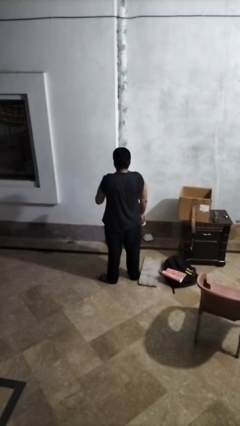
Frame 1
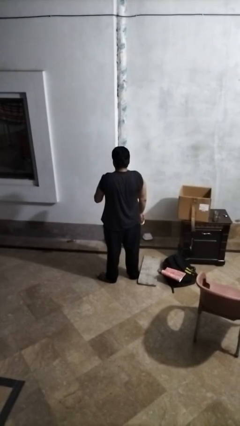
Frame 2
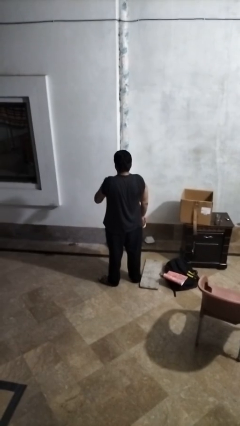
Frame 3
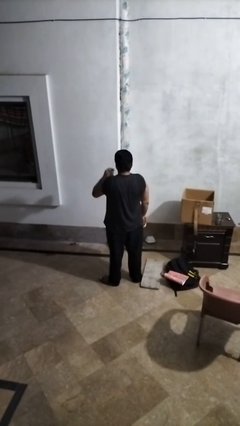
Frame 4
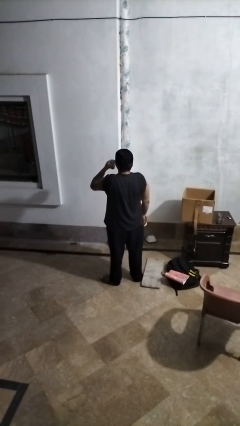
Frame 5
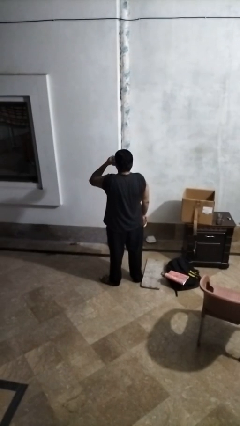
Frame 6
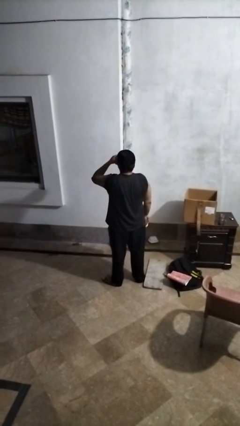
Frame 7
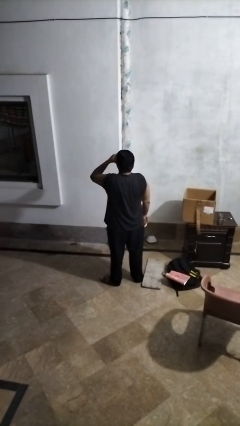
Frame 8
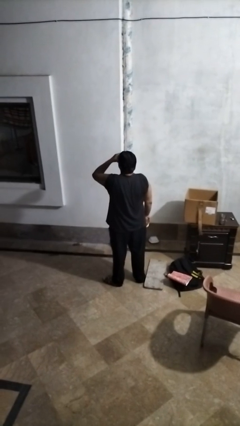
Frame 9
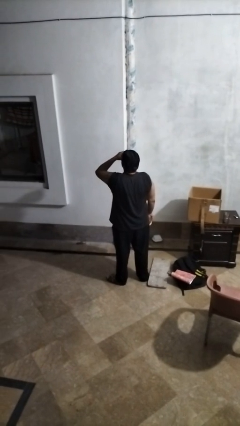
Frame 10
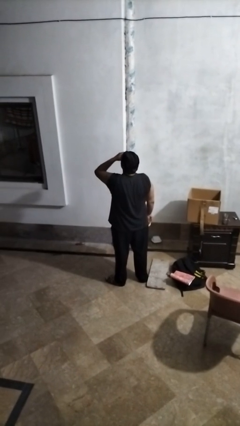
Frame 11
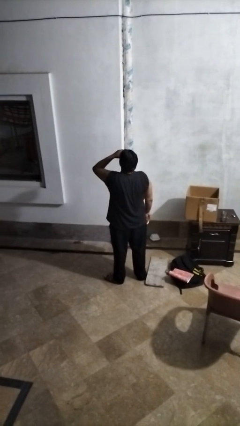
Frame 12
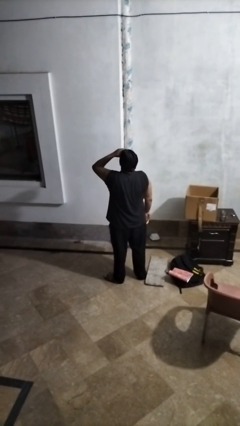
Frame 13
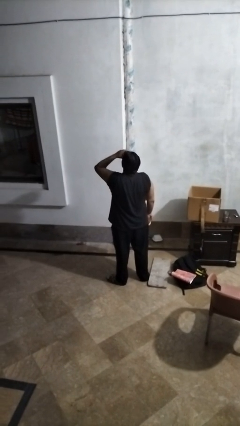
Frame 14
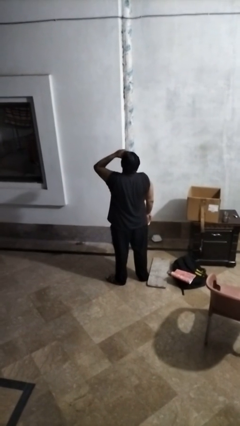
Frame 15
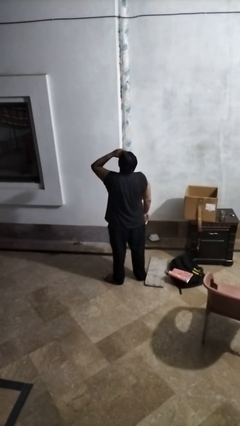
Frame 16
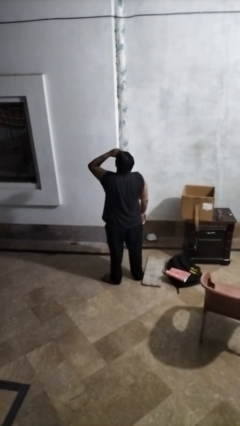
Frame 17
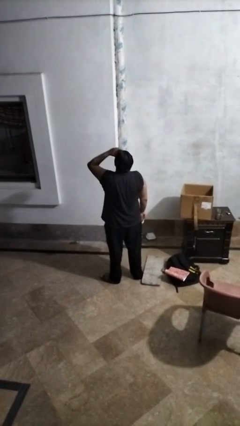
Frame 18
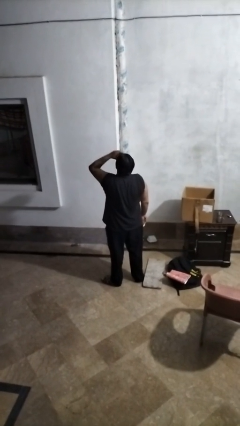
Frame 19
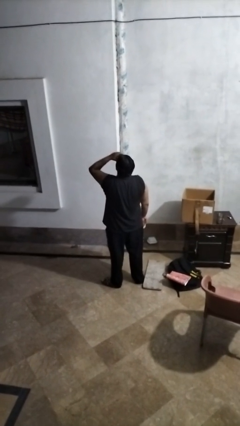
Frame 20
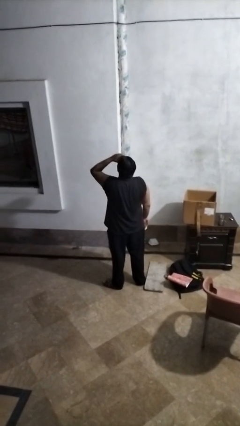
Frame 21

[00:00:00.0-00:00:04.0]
person drinks from beverage can

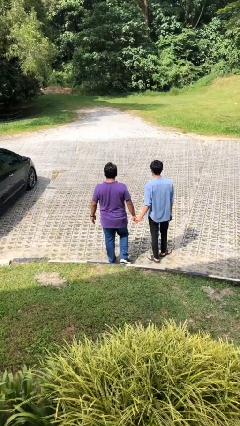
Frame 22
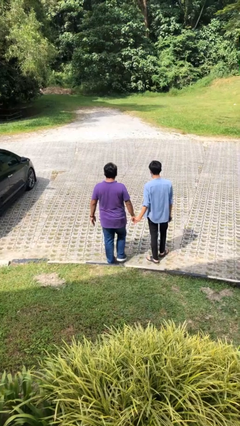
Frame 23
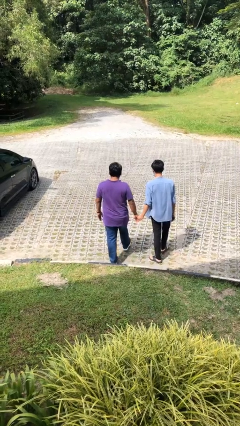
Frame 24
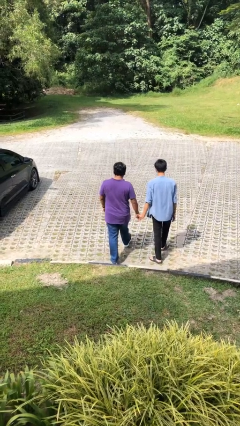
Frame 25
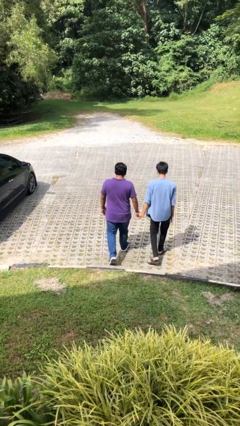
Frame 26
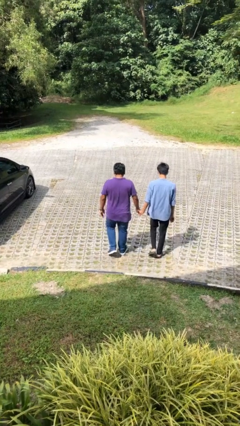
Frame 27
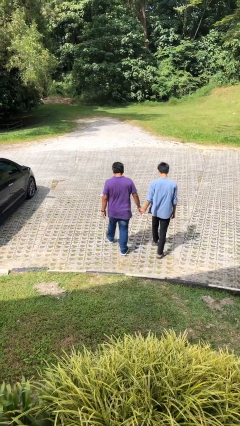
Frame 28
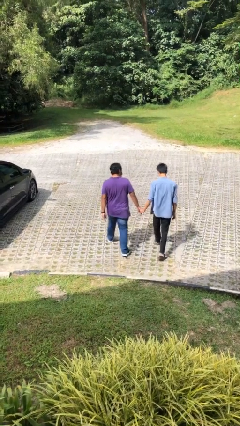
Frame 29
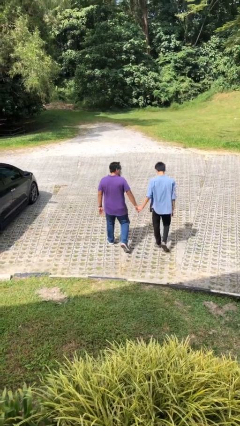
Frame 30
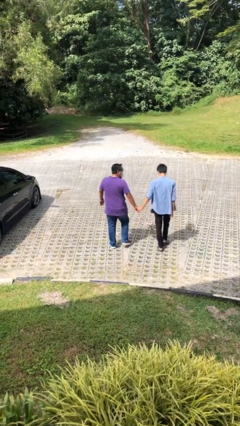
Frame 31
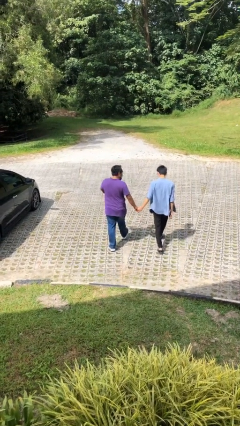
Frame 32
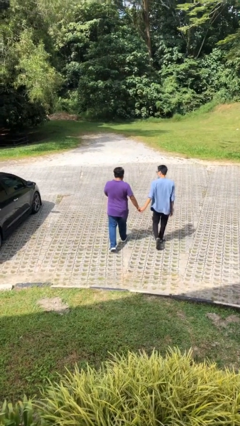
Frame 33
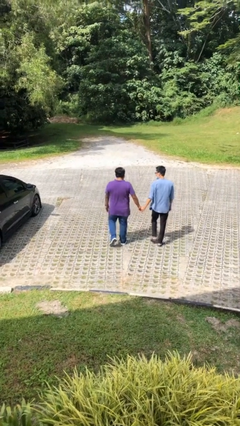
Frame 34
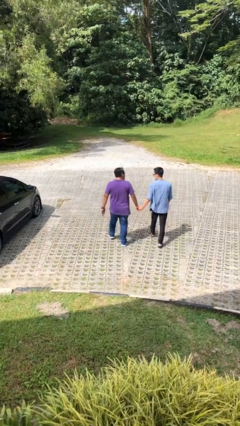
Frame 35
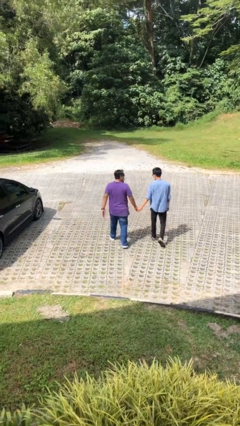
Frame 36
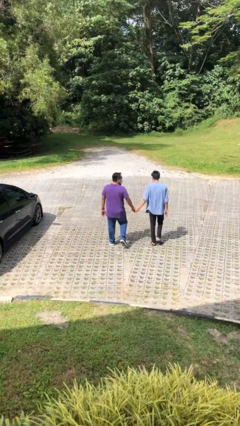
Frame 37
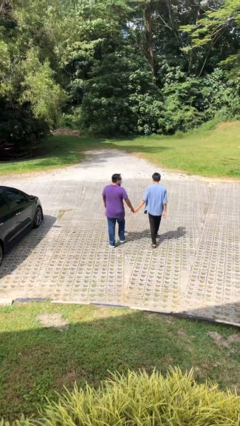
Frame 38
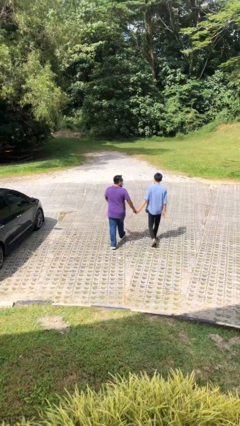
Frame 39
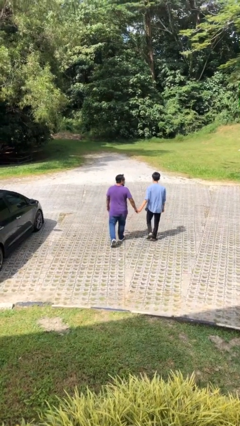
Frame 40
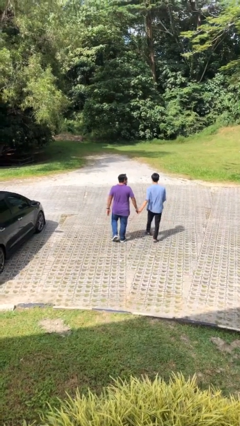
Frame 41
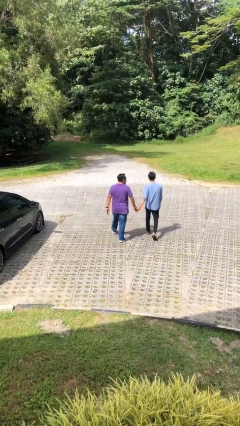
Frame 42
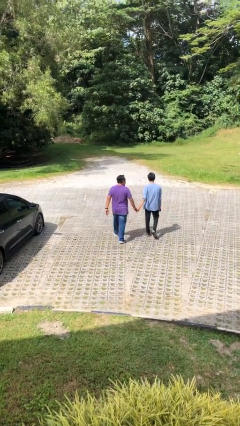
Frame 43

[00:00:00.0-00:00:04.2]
person holds hand

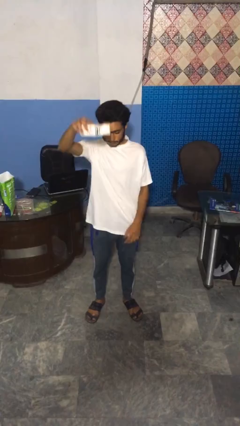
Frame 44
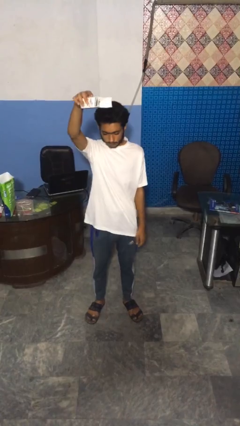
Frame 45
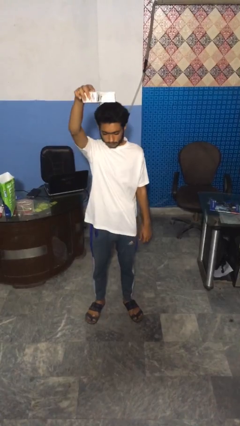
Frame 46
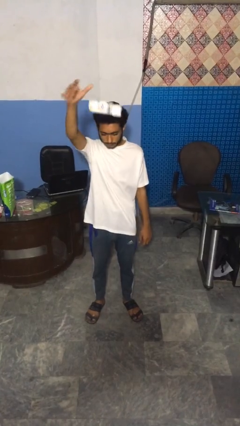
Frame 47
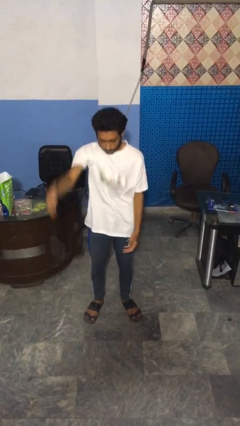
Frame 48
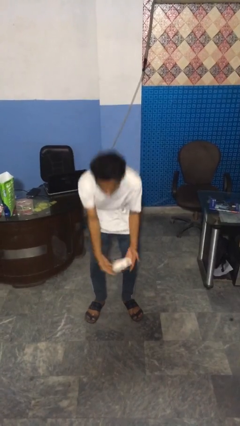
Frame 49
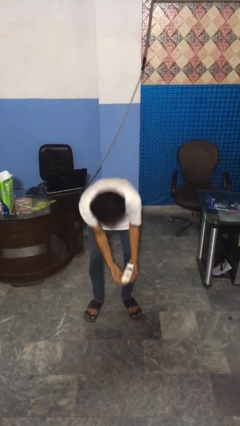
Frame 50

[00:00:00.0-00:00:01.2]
person drops object

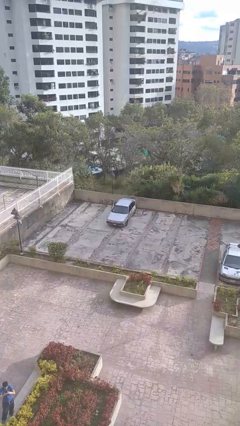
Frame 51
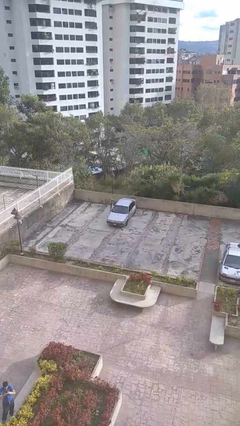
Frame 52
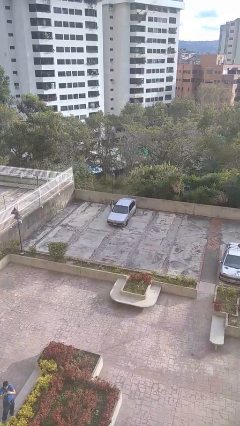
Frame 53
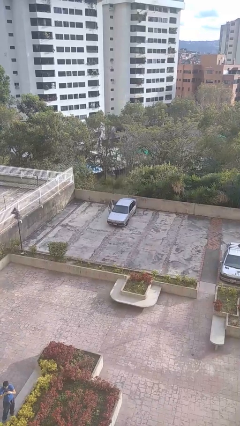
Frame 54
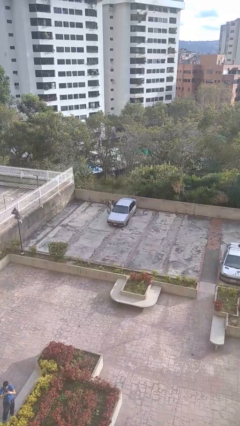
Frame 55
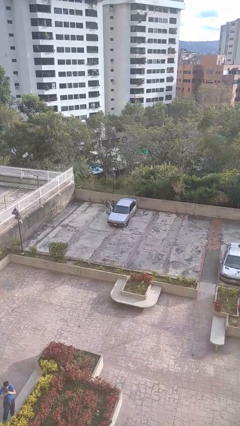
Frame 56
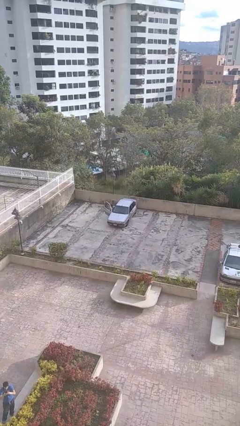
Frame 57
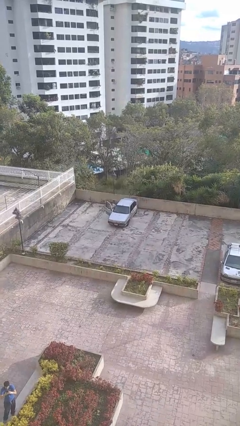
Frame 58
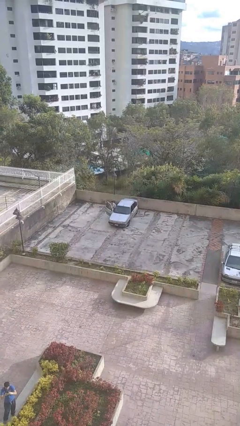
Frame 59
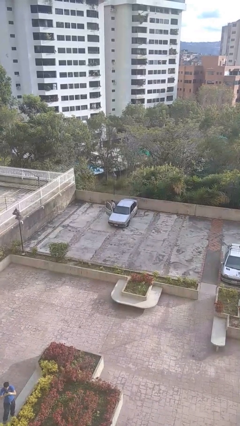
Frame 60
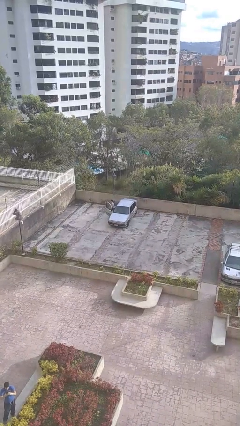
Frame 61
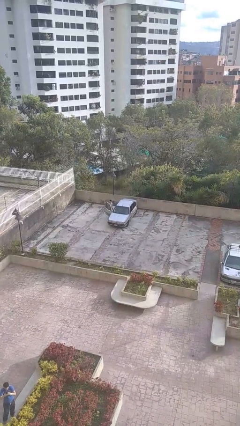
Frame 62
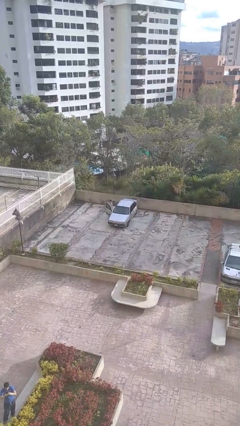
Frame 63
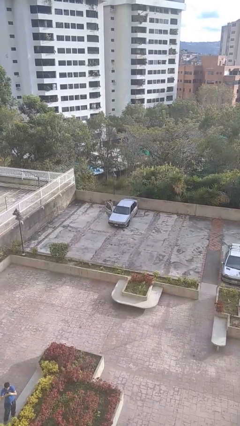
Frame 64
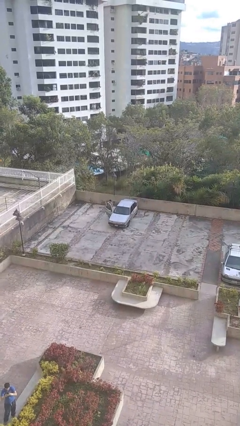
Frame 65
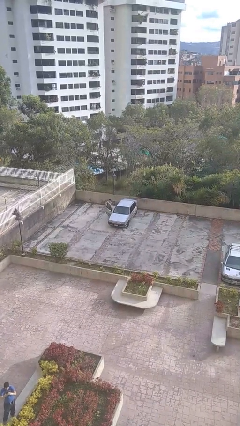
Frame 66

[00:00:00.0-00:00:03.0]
car drops off person

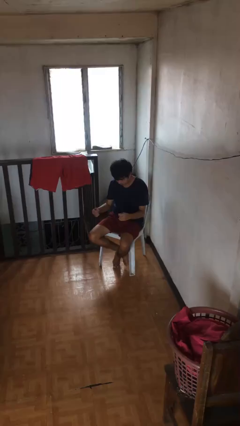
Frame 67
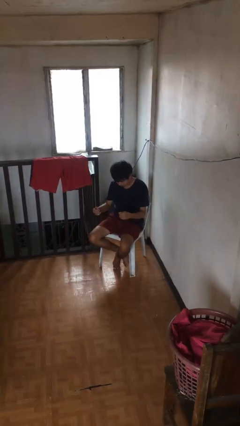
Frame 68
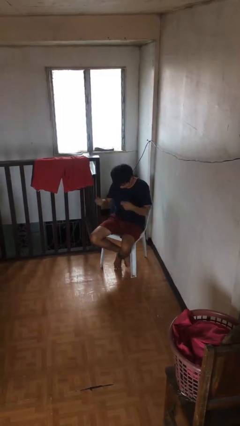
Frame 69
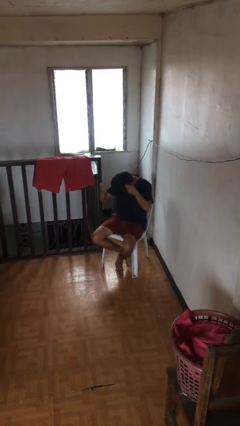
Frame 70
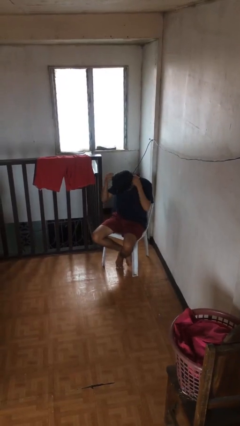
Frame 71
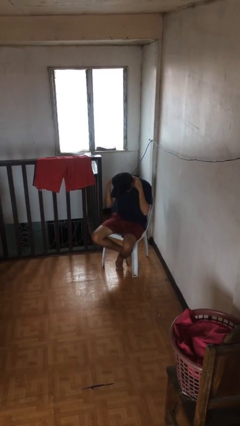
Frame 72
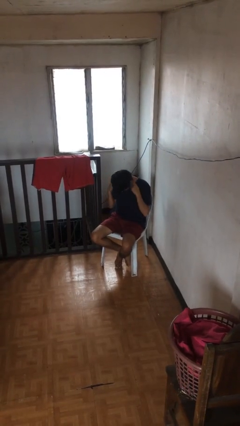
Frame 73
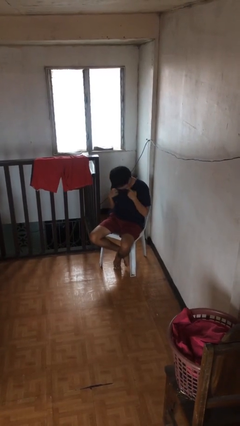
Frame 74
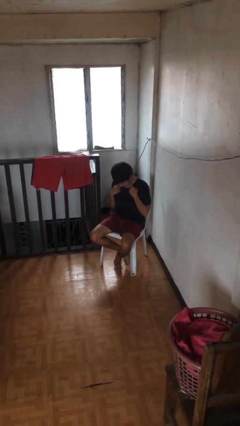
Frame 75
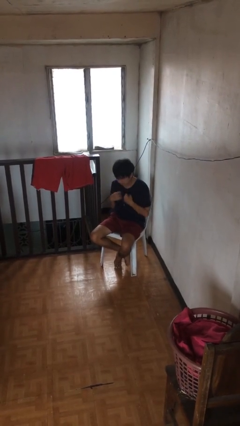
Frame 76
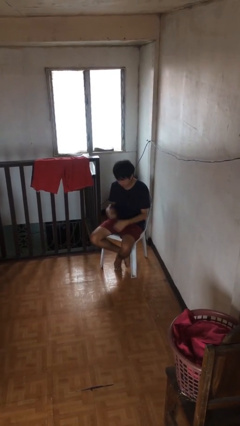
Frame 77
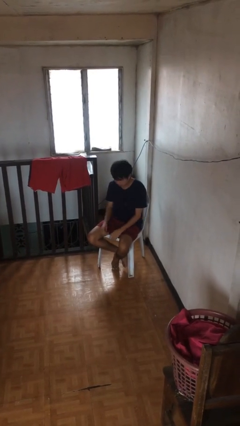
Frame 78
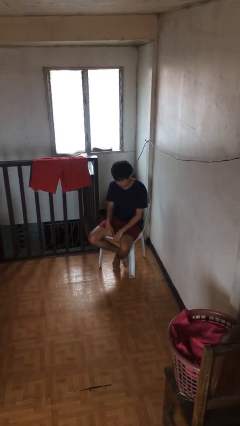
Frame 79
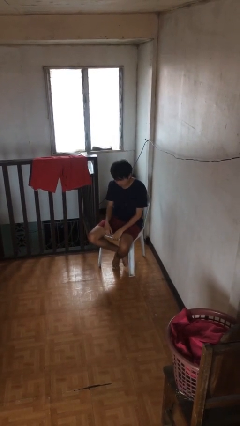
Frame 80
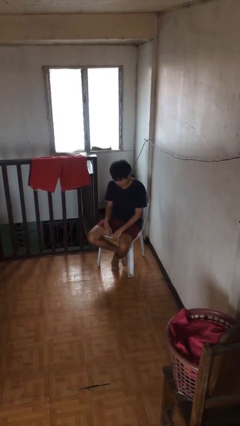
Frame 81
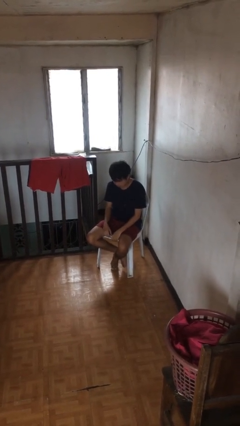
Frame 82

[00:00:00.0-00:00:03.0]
person puts on necklace

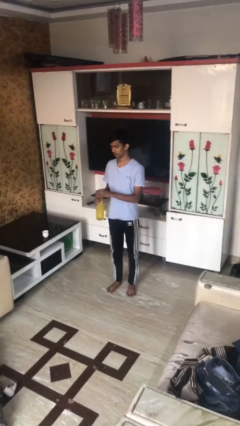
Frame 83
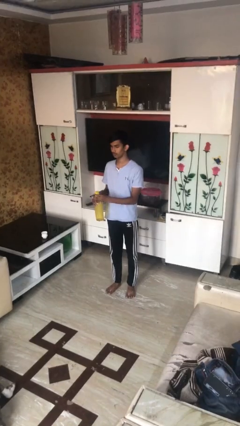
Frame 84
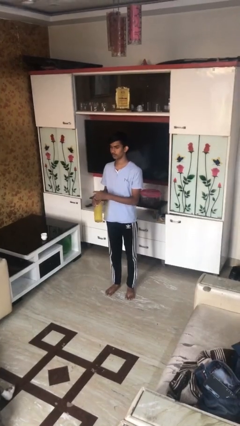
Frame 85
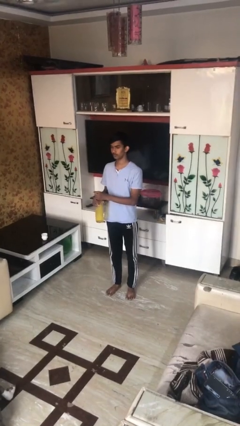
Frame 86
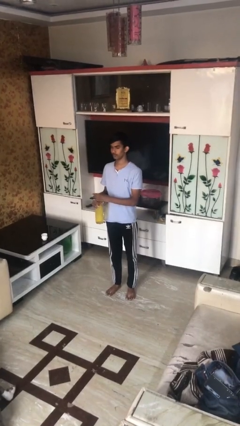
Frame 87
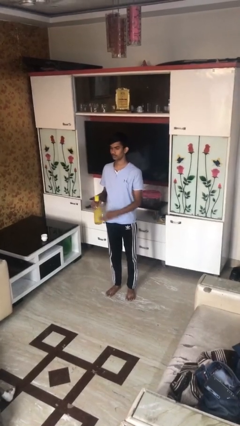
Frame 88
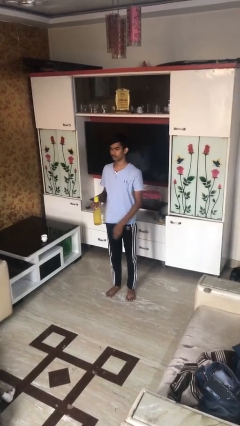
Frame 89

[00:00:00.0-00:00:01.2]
person screws lid to bottle

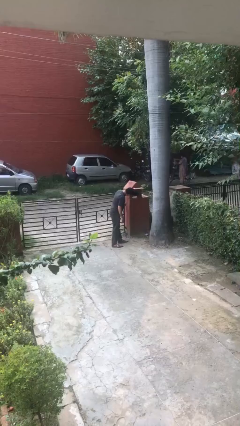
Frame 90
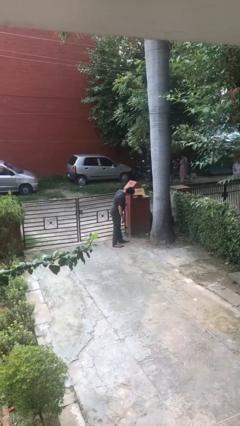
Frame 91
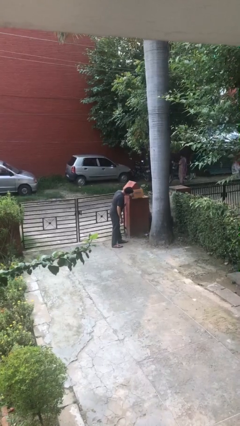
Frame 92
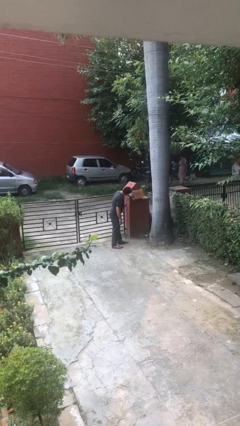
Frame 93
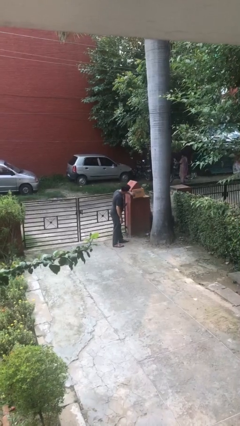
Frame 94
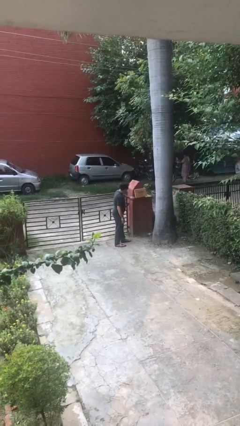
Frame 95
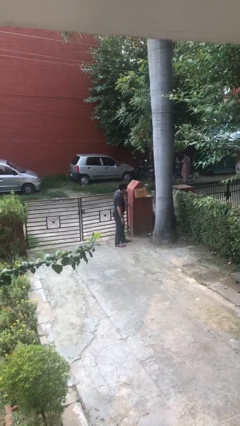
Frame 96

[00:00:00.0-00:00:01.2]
person closes mailbox
